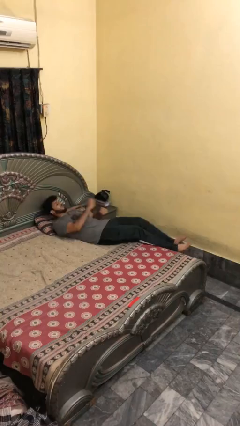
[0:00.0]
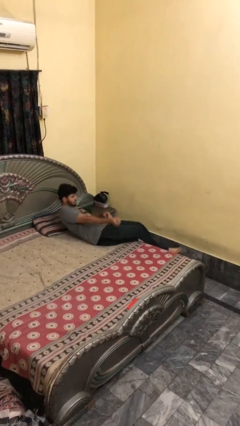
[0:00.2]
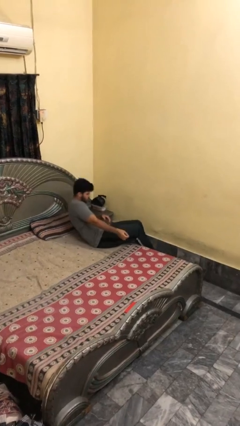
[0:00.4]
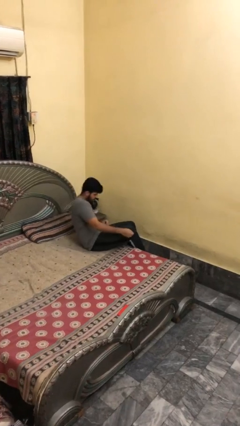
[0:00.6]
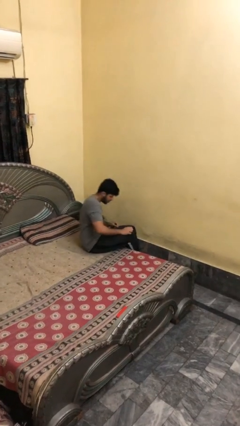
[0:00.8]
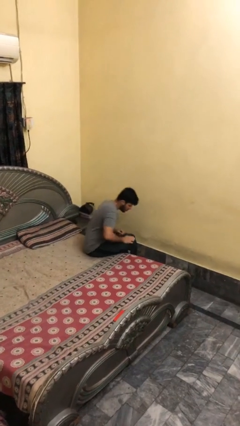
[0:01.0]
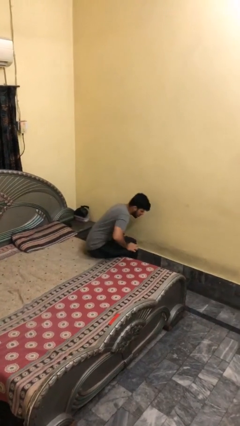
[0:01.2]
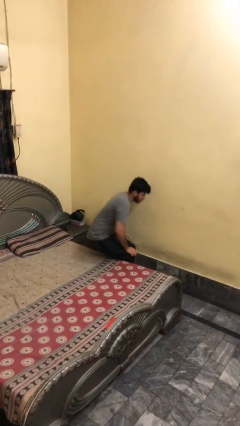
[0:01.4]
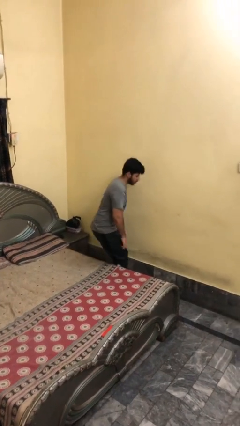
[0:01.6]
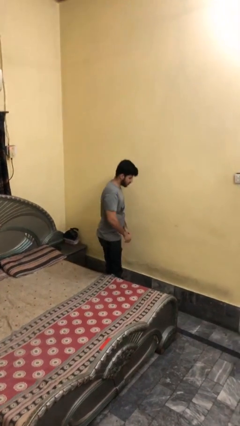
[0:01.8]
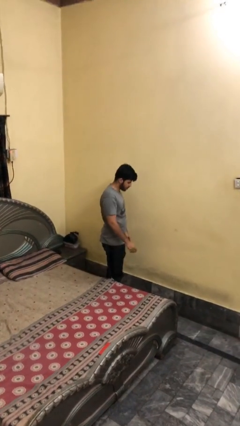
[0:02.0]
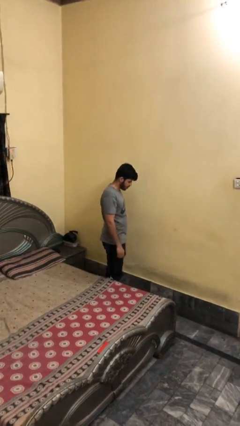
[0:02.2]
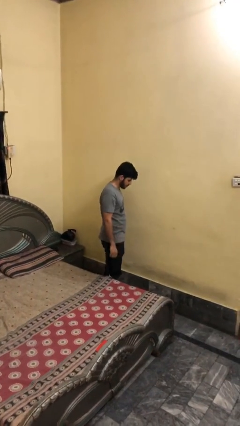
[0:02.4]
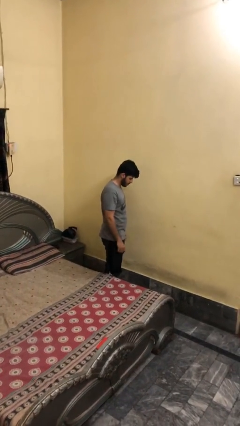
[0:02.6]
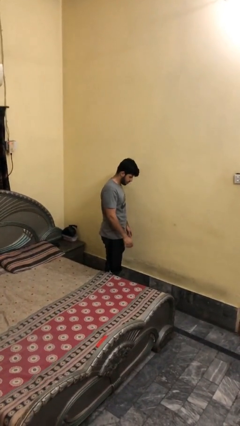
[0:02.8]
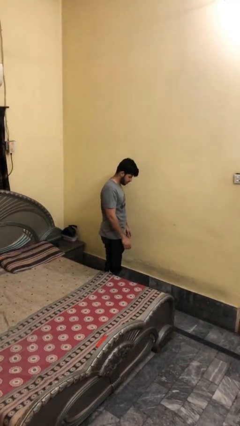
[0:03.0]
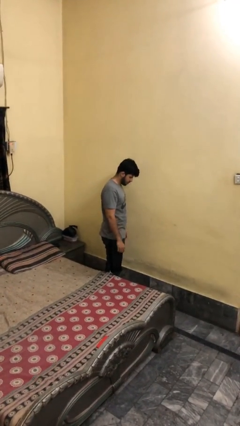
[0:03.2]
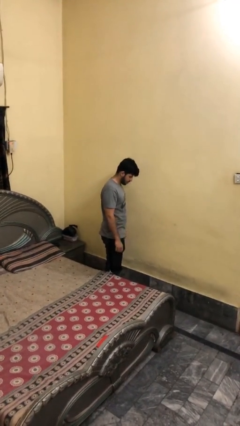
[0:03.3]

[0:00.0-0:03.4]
person stands up

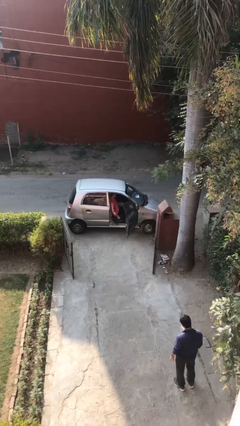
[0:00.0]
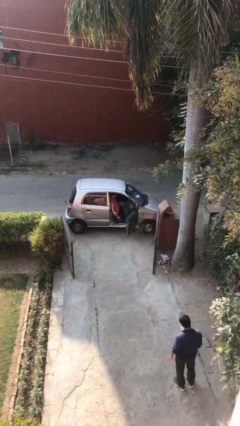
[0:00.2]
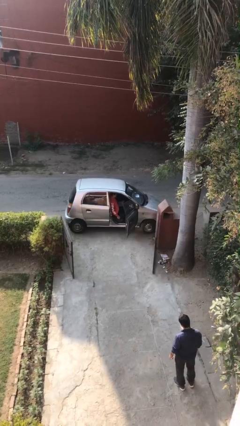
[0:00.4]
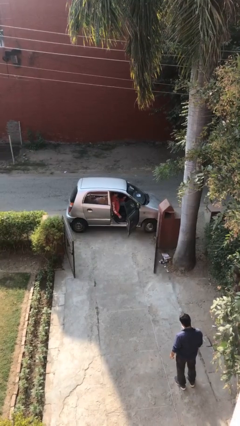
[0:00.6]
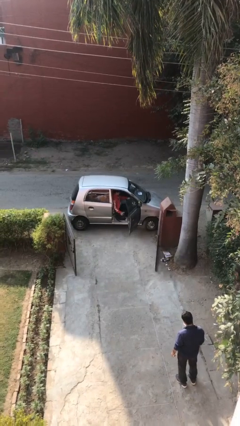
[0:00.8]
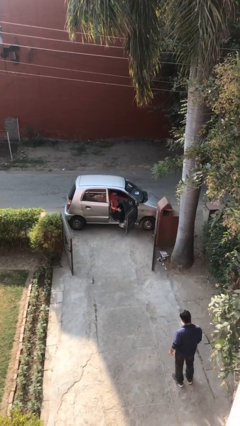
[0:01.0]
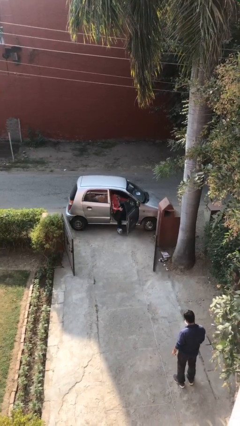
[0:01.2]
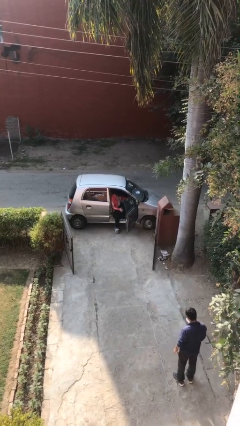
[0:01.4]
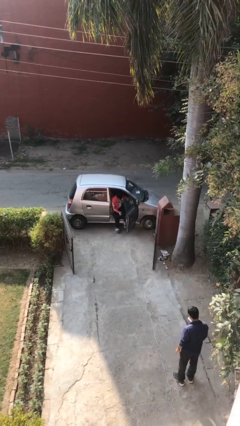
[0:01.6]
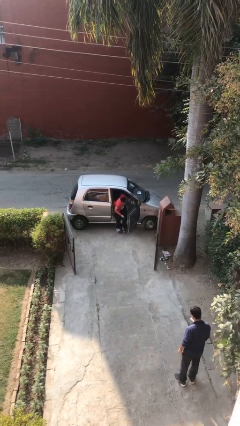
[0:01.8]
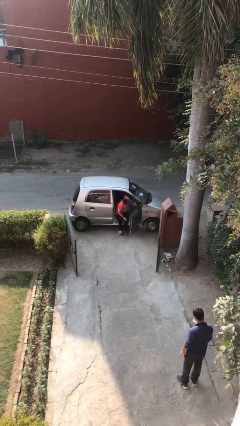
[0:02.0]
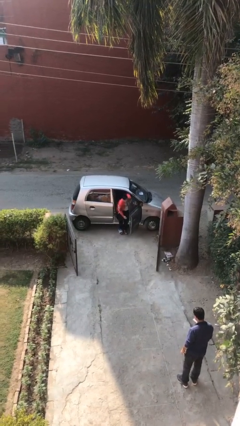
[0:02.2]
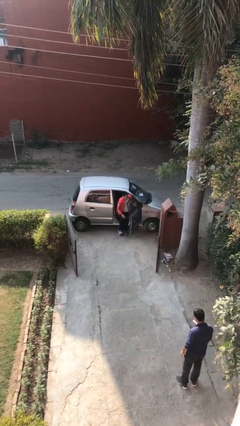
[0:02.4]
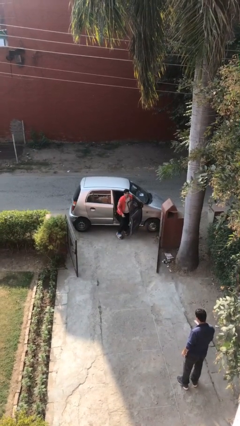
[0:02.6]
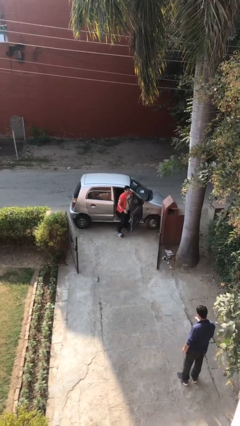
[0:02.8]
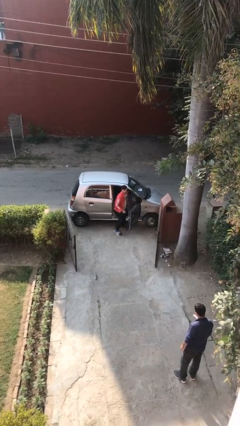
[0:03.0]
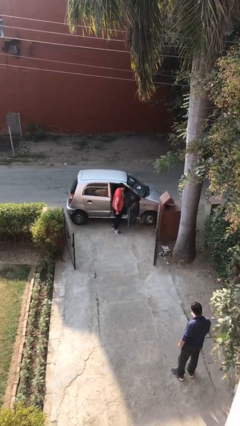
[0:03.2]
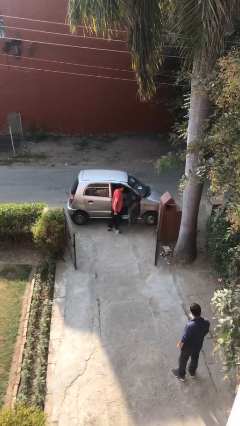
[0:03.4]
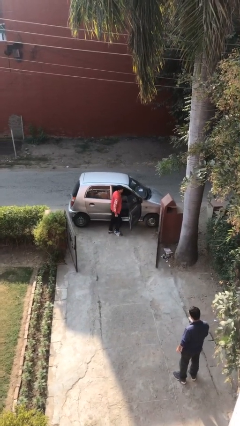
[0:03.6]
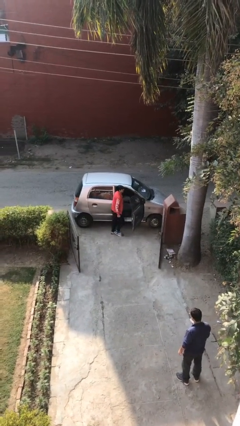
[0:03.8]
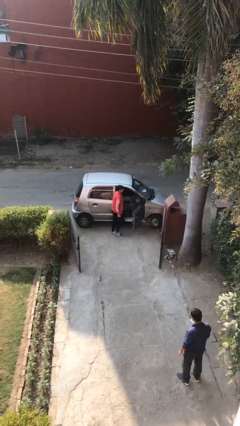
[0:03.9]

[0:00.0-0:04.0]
person exits car

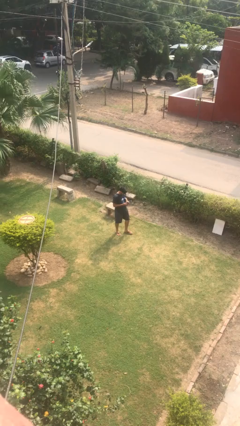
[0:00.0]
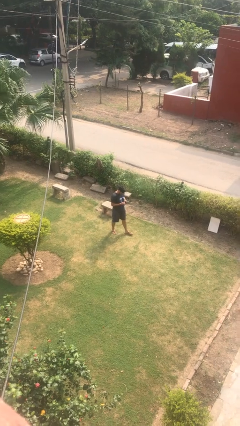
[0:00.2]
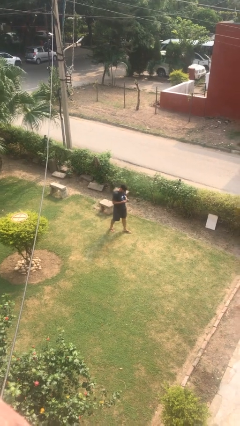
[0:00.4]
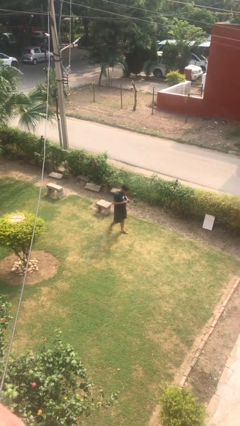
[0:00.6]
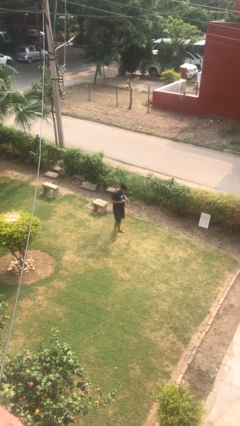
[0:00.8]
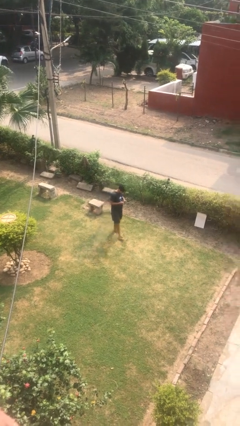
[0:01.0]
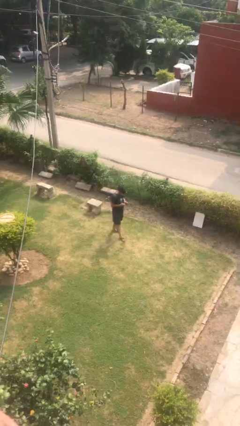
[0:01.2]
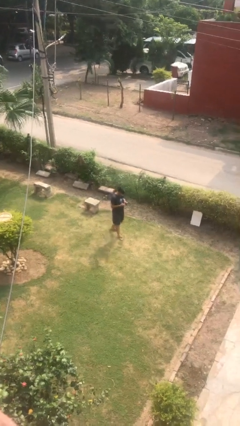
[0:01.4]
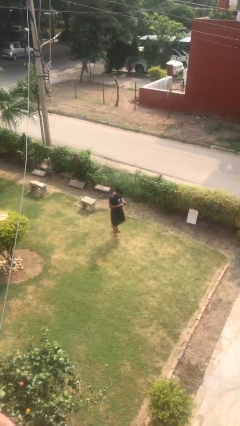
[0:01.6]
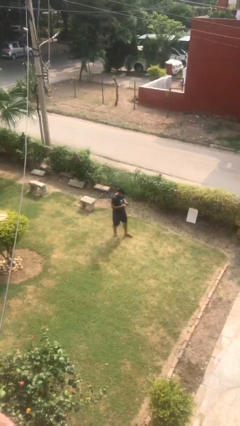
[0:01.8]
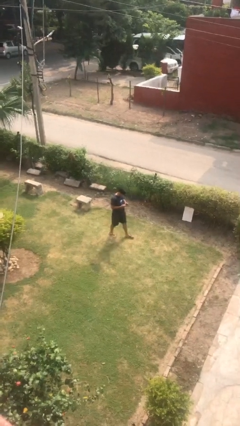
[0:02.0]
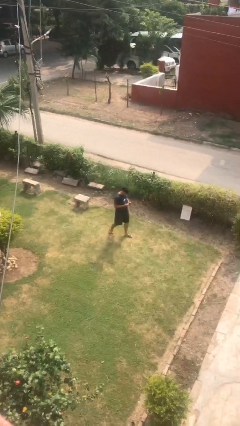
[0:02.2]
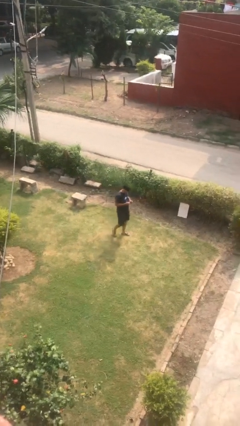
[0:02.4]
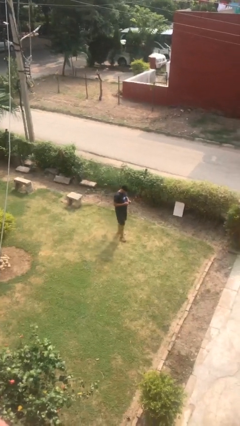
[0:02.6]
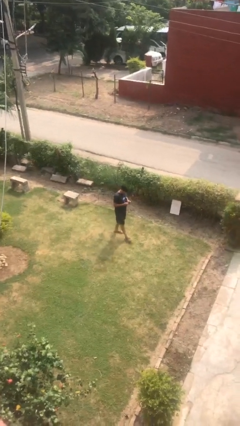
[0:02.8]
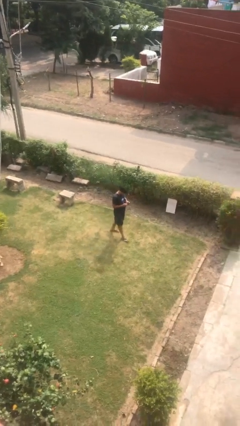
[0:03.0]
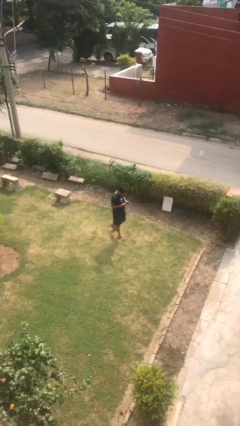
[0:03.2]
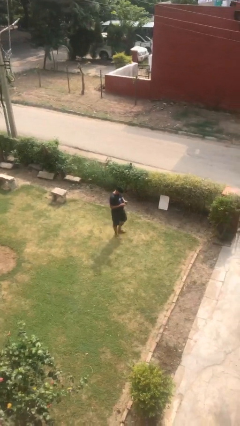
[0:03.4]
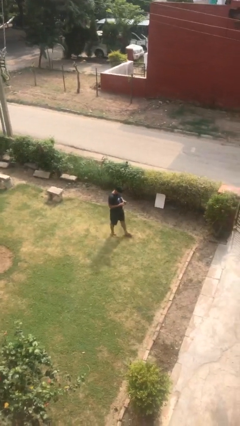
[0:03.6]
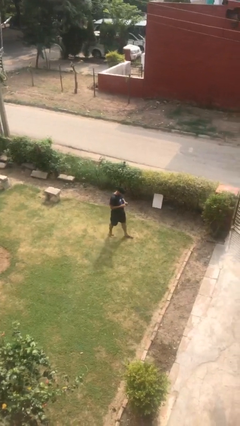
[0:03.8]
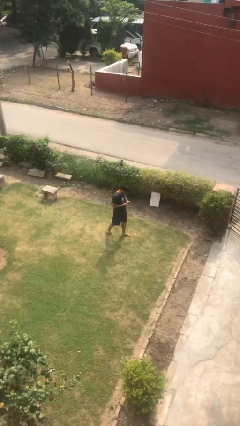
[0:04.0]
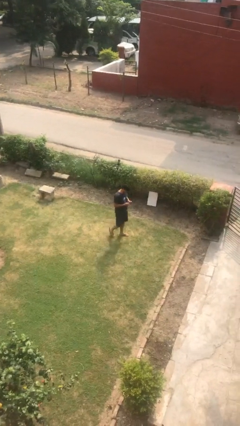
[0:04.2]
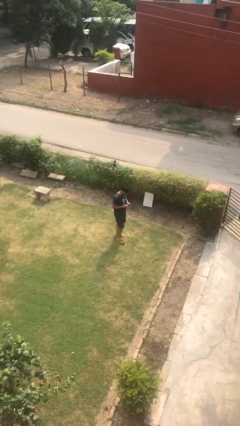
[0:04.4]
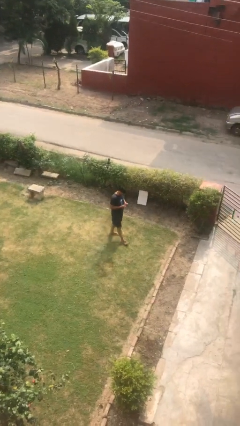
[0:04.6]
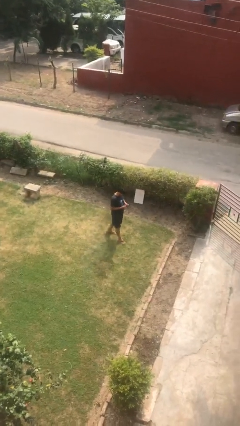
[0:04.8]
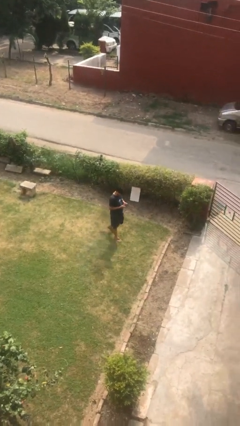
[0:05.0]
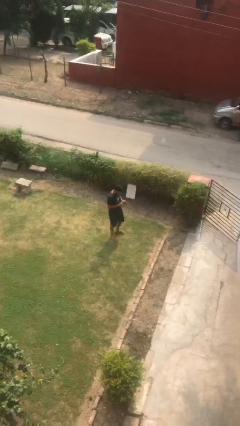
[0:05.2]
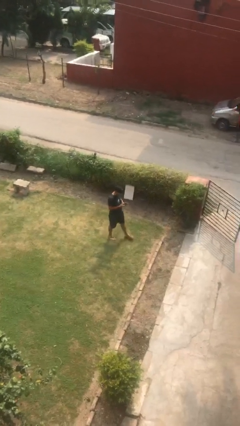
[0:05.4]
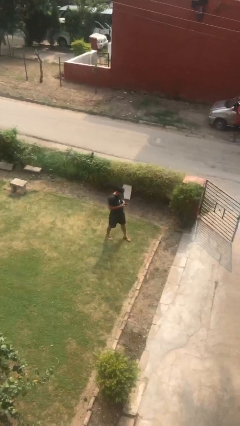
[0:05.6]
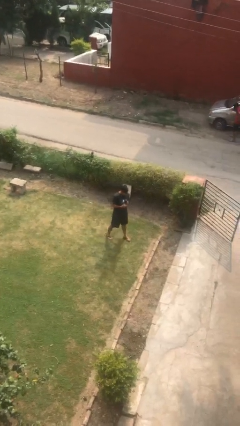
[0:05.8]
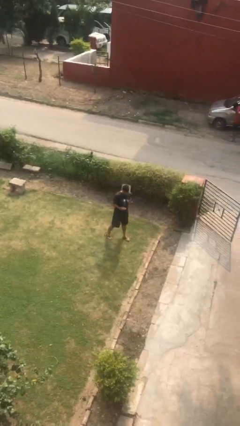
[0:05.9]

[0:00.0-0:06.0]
person texts on phone

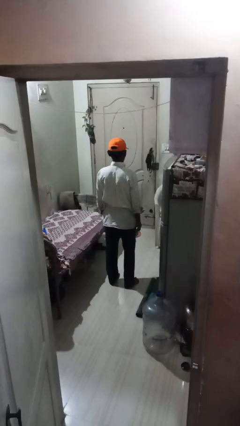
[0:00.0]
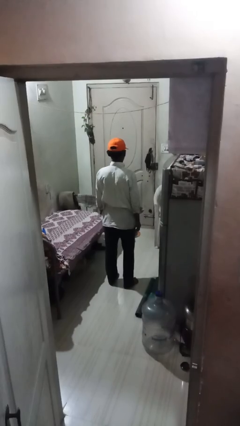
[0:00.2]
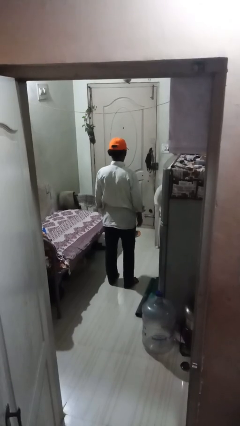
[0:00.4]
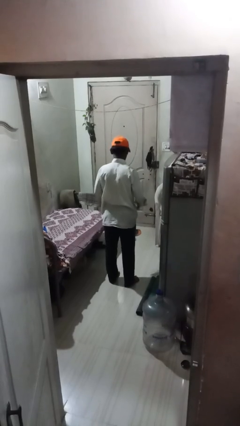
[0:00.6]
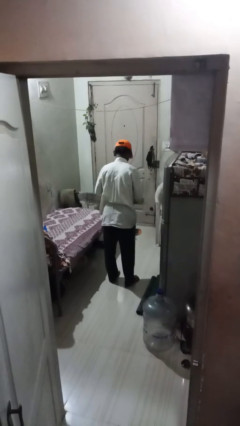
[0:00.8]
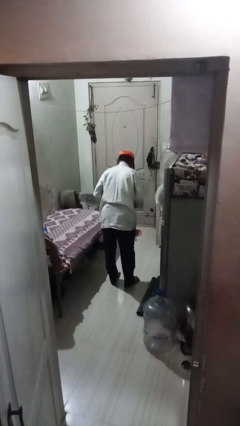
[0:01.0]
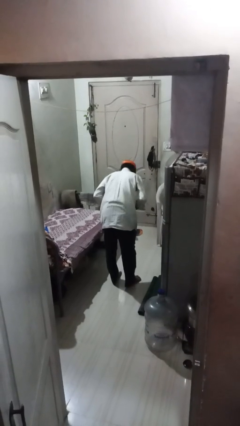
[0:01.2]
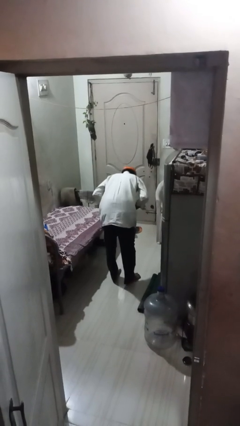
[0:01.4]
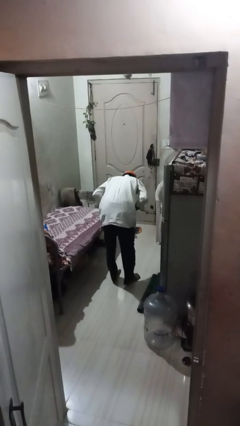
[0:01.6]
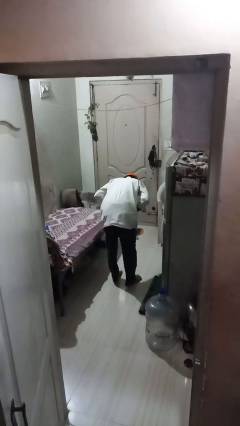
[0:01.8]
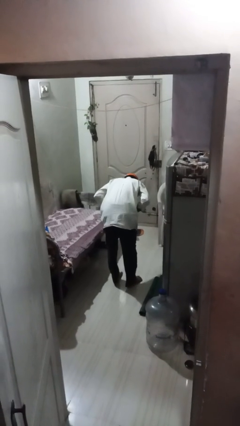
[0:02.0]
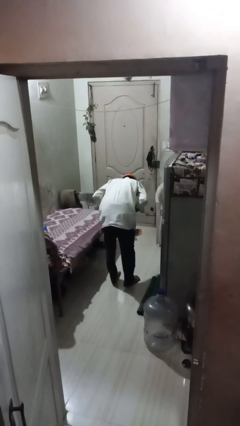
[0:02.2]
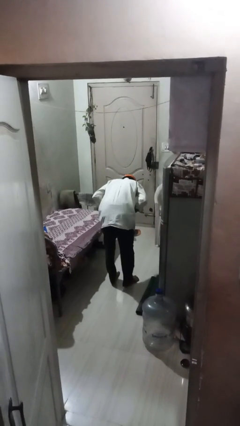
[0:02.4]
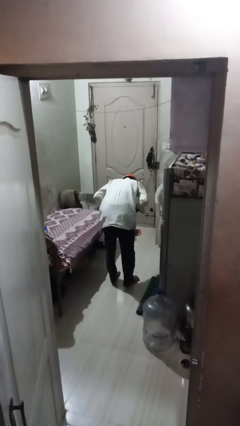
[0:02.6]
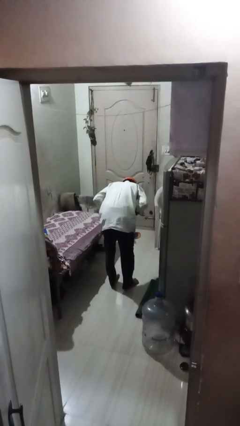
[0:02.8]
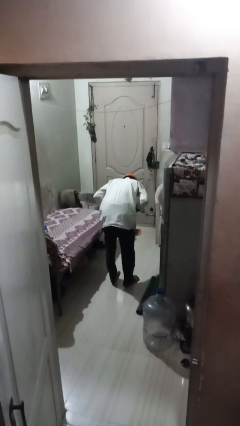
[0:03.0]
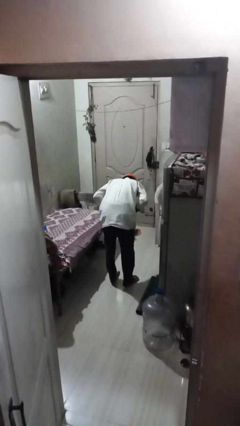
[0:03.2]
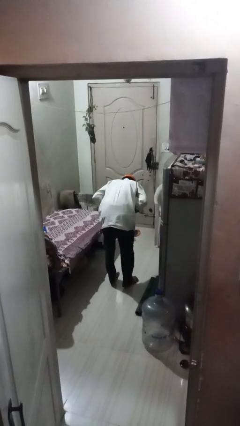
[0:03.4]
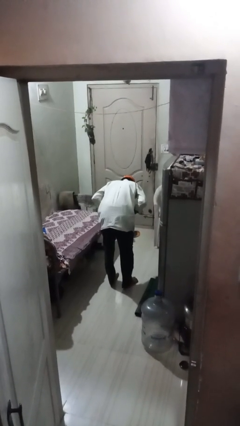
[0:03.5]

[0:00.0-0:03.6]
person bows

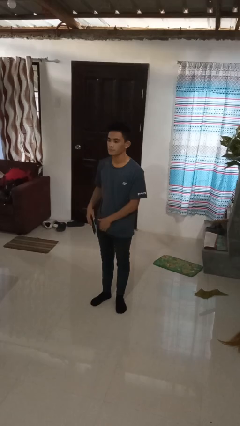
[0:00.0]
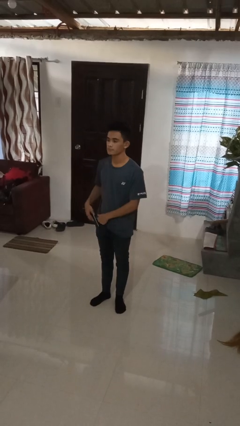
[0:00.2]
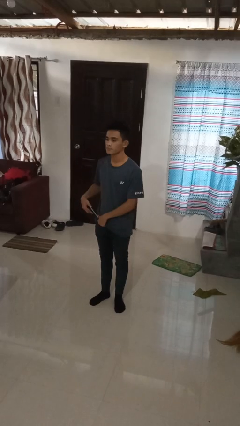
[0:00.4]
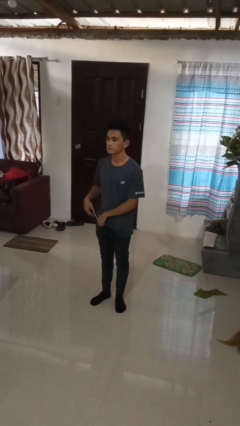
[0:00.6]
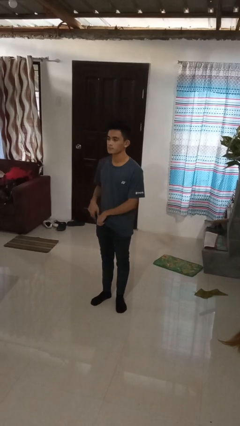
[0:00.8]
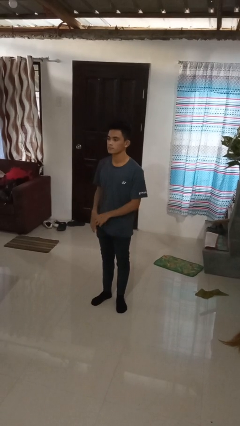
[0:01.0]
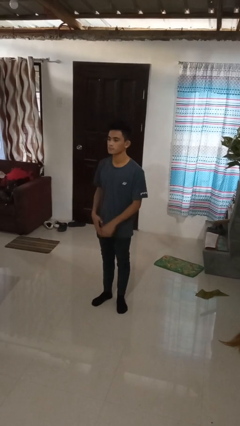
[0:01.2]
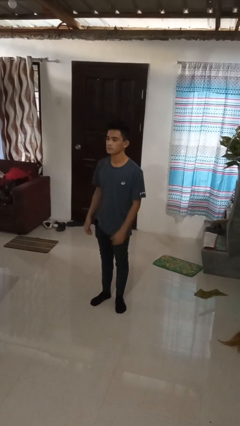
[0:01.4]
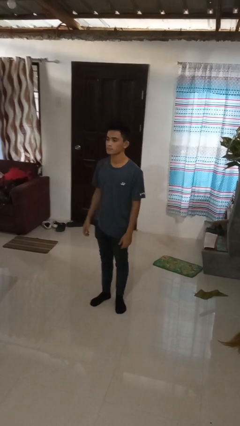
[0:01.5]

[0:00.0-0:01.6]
person puts phone into pocket
